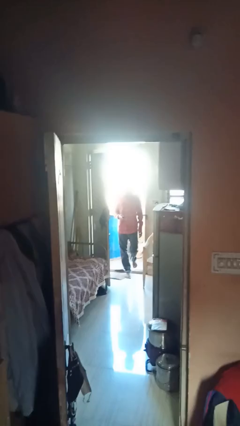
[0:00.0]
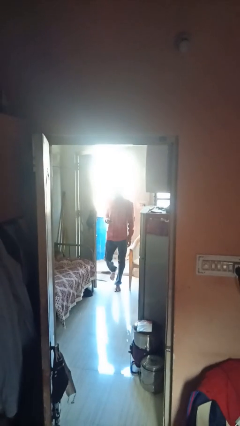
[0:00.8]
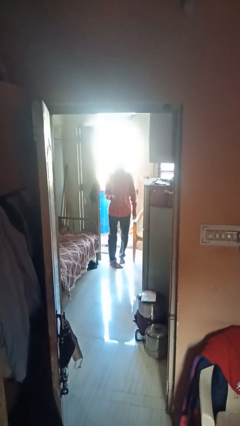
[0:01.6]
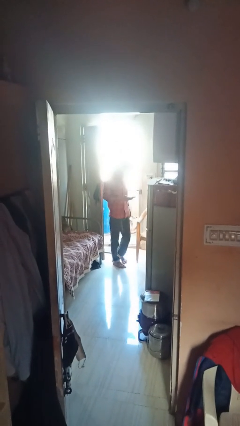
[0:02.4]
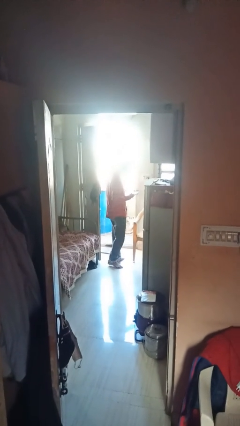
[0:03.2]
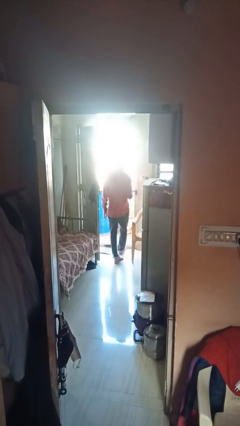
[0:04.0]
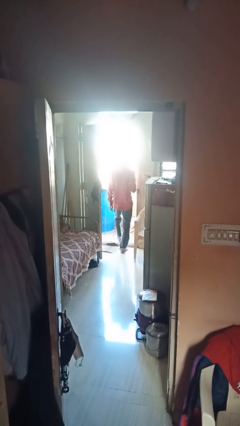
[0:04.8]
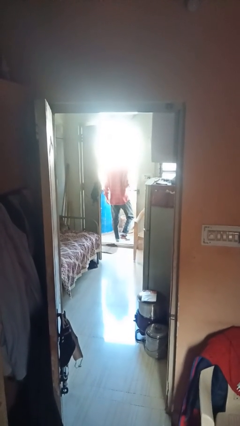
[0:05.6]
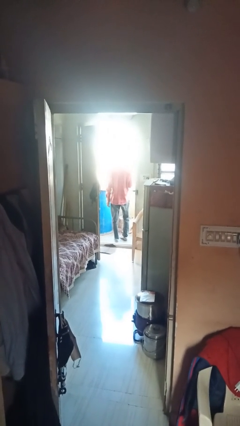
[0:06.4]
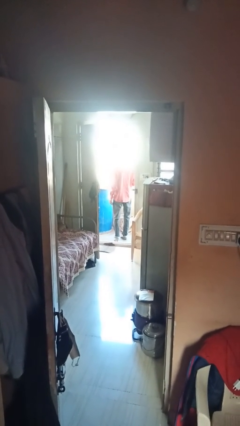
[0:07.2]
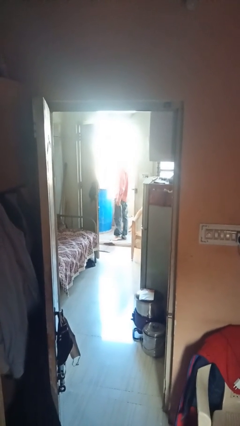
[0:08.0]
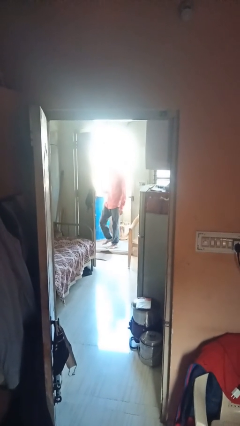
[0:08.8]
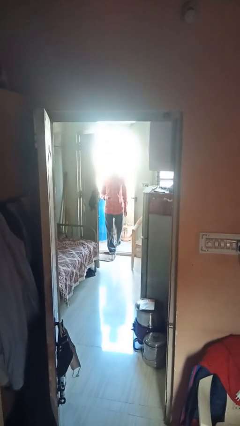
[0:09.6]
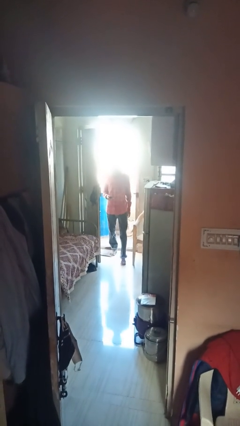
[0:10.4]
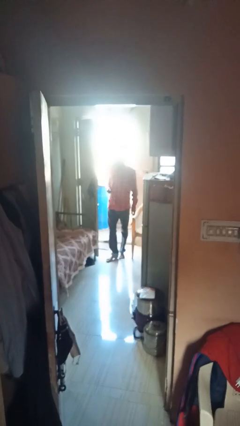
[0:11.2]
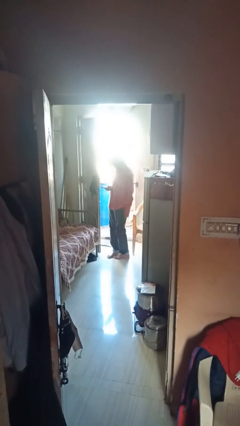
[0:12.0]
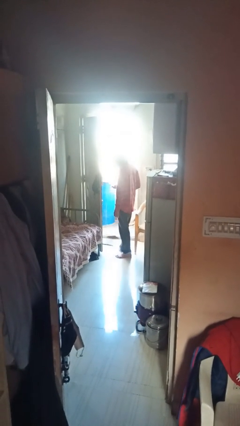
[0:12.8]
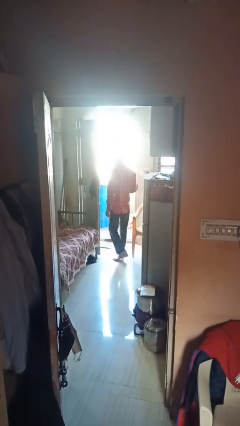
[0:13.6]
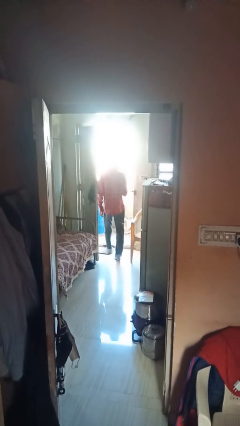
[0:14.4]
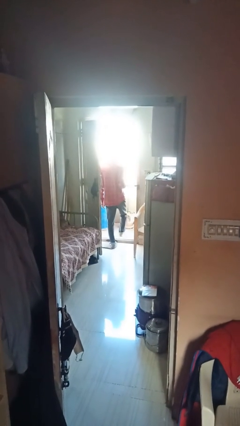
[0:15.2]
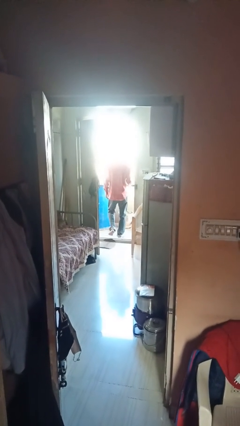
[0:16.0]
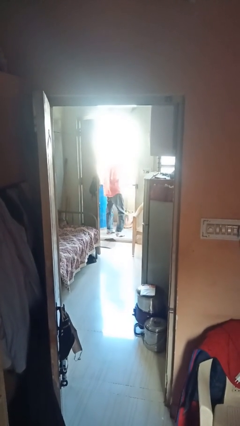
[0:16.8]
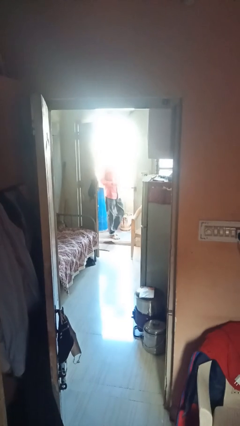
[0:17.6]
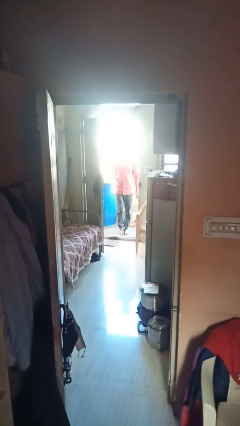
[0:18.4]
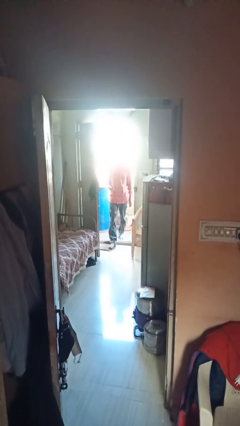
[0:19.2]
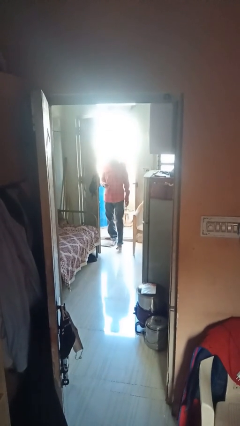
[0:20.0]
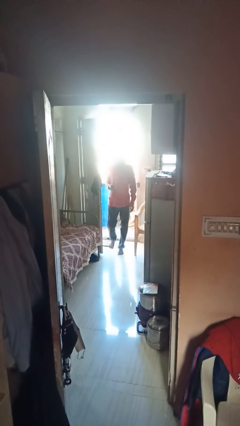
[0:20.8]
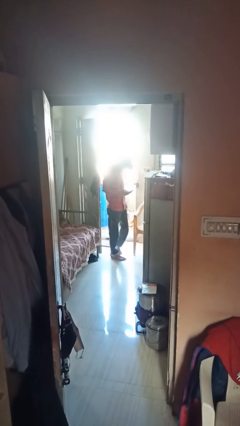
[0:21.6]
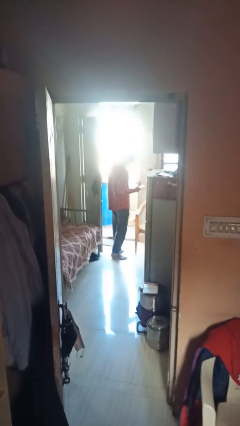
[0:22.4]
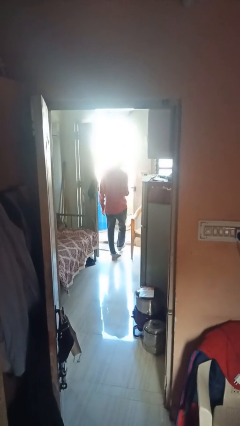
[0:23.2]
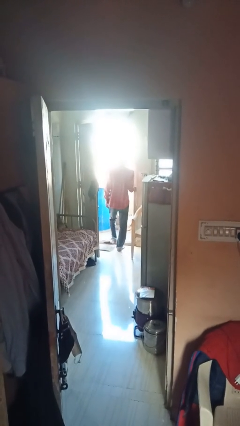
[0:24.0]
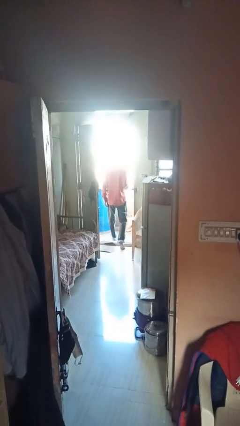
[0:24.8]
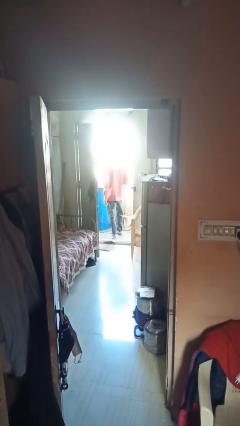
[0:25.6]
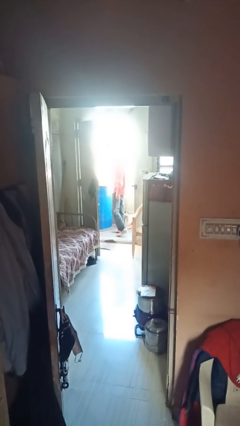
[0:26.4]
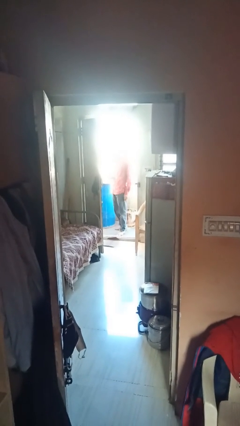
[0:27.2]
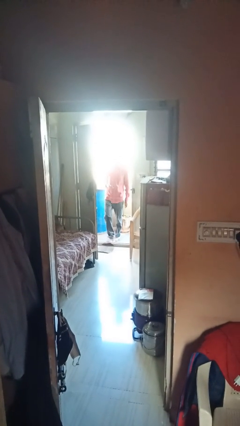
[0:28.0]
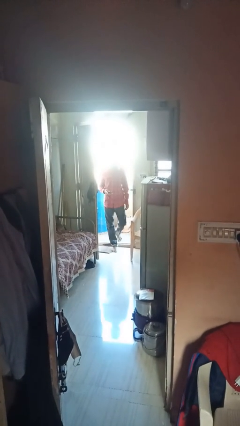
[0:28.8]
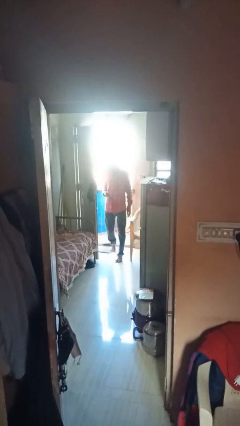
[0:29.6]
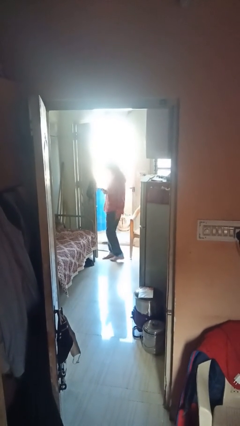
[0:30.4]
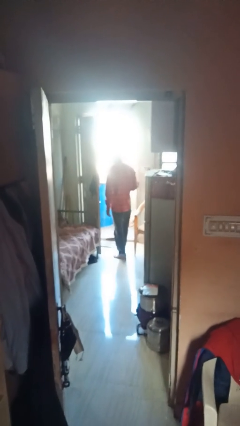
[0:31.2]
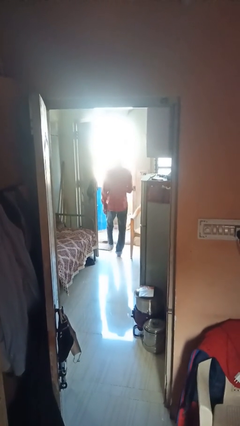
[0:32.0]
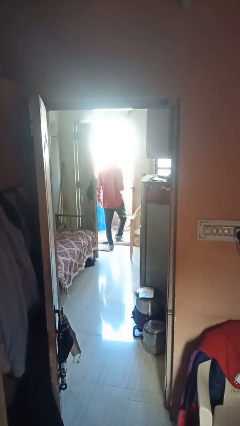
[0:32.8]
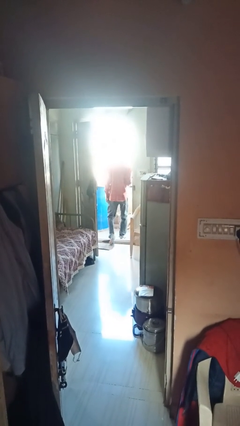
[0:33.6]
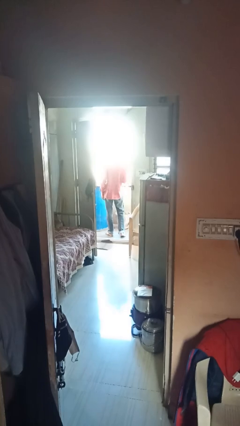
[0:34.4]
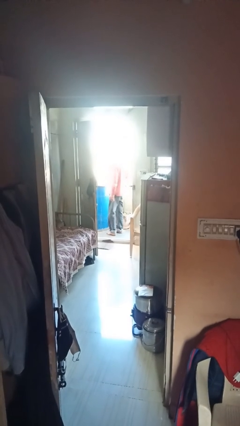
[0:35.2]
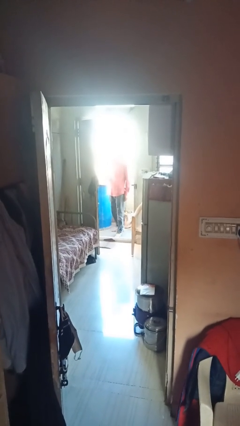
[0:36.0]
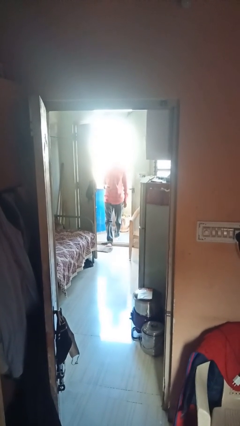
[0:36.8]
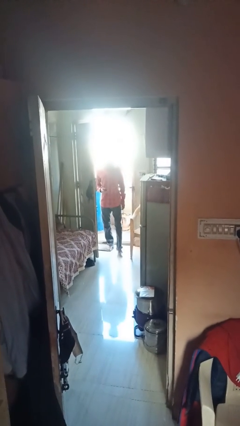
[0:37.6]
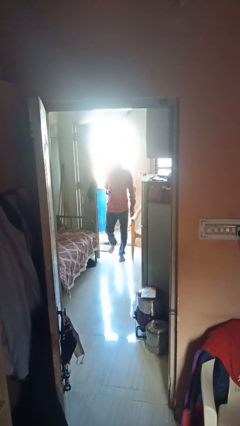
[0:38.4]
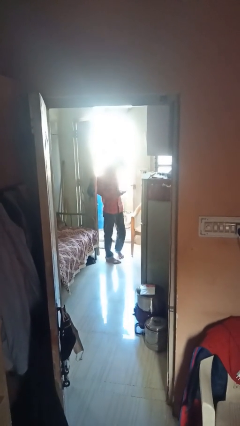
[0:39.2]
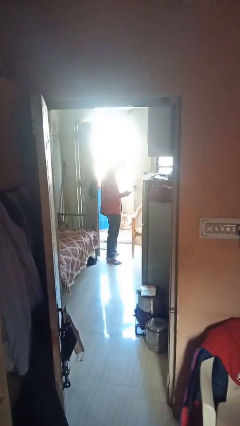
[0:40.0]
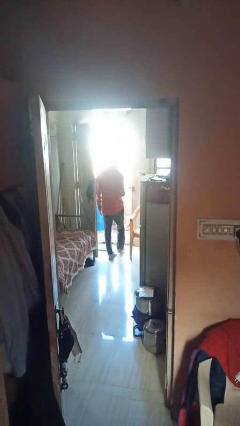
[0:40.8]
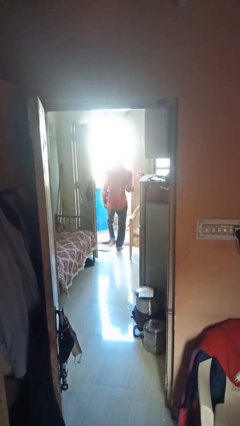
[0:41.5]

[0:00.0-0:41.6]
person texts on phone

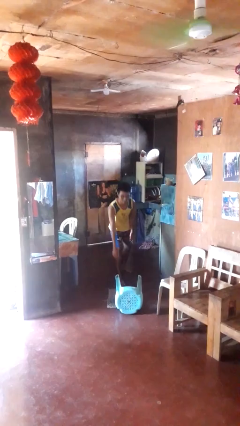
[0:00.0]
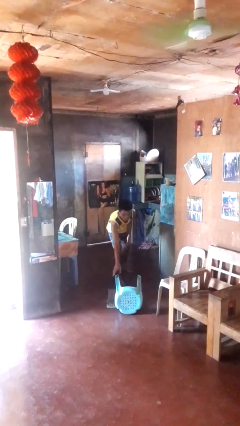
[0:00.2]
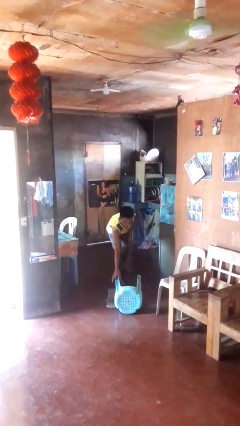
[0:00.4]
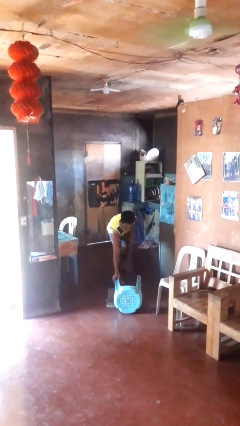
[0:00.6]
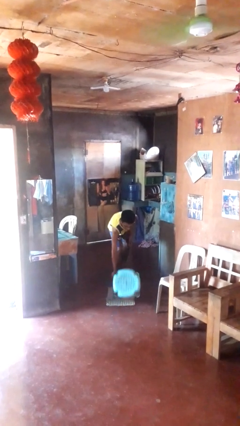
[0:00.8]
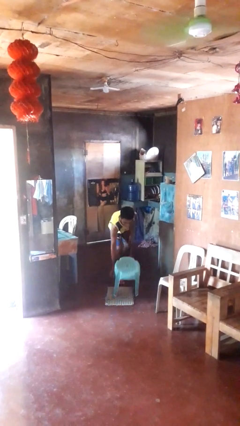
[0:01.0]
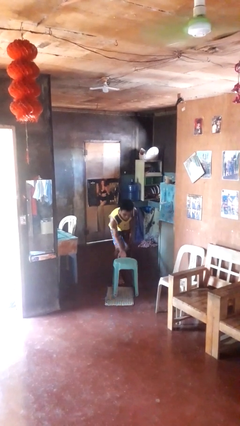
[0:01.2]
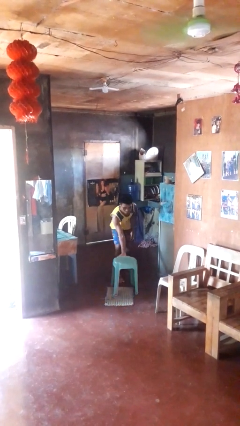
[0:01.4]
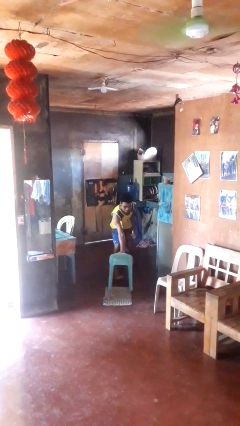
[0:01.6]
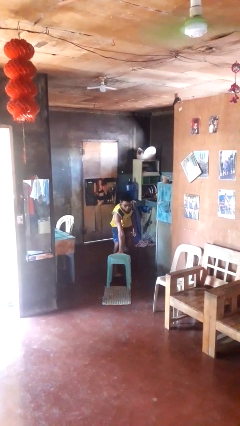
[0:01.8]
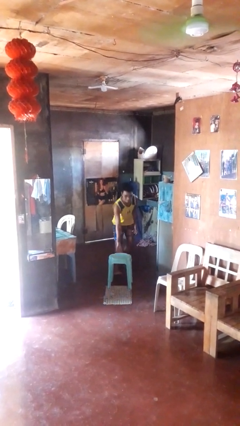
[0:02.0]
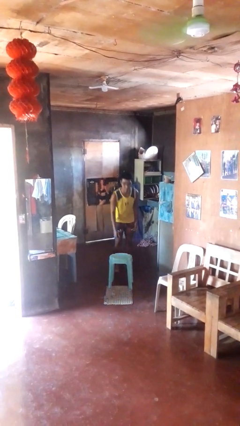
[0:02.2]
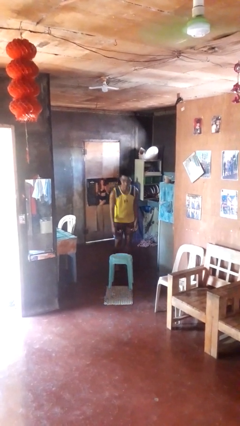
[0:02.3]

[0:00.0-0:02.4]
person sets upright furniture

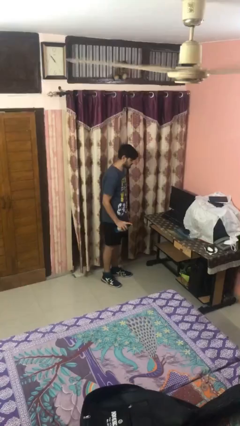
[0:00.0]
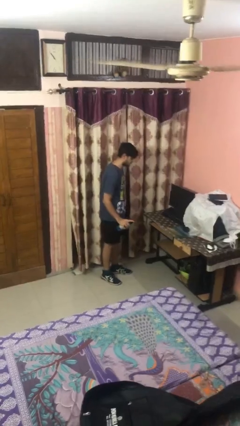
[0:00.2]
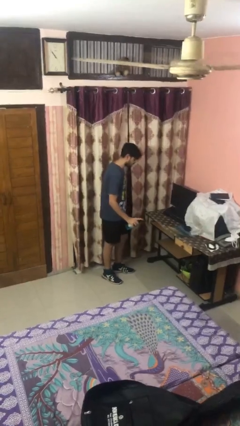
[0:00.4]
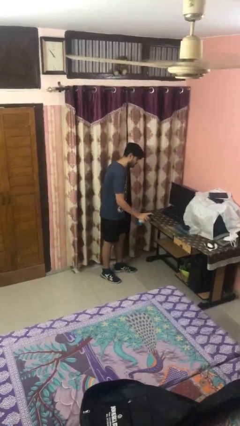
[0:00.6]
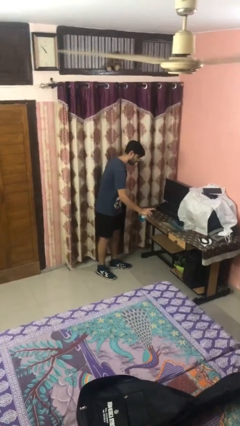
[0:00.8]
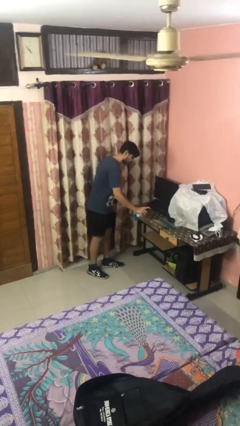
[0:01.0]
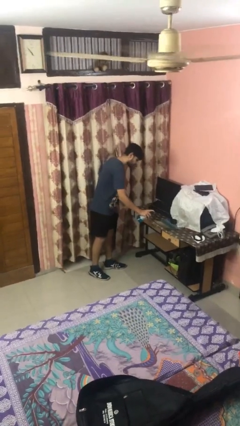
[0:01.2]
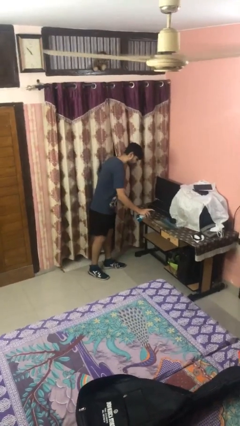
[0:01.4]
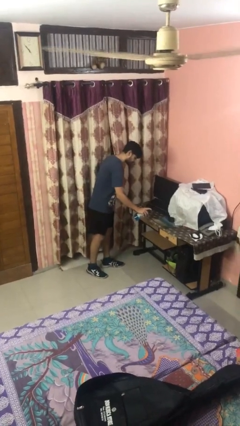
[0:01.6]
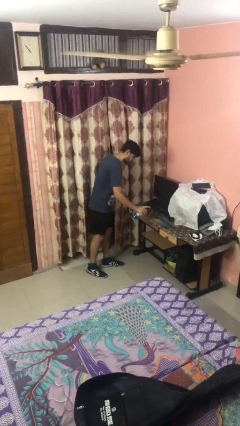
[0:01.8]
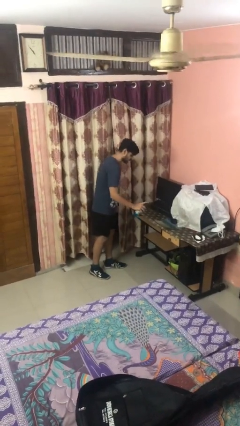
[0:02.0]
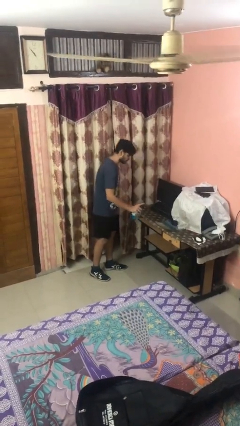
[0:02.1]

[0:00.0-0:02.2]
person sprays from bottle

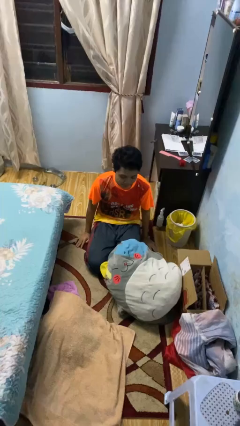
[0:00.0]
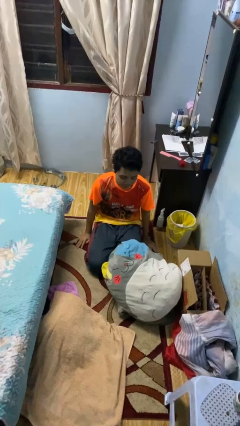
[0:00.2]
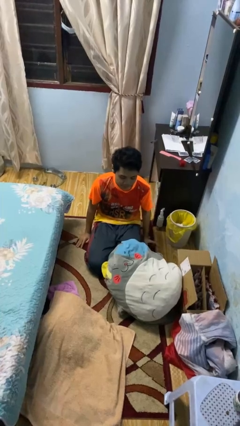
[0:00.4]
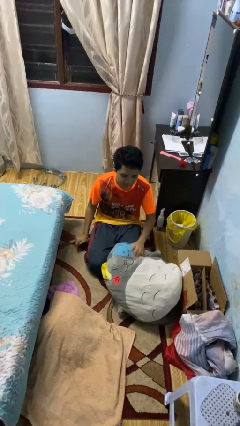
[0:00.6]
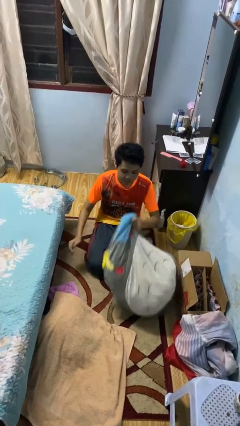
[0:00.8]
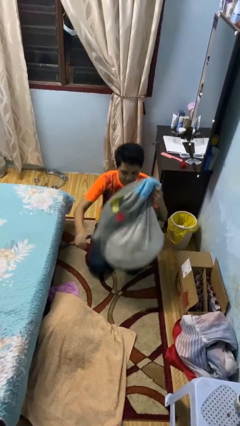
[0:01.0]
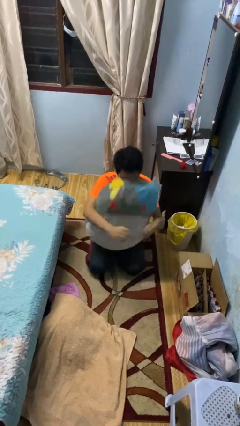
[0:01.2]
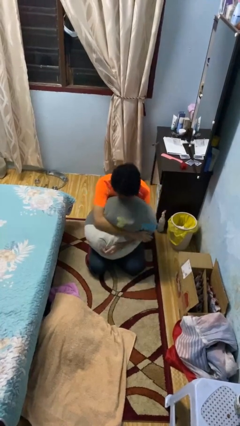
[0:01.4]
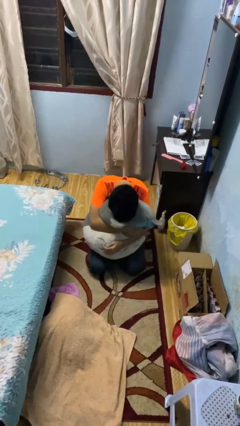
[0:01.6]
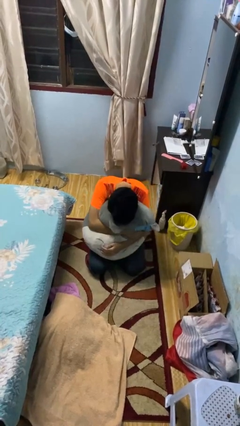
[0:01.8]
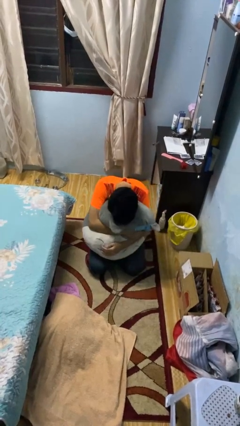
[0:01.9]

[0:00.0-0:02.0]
person hugs stuffed animal
